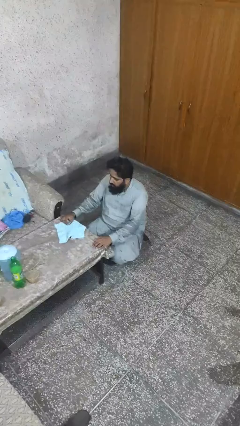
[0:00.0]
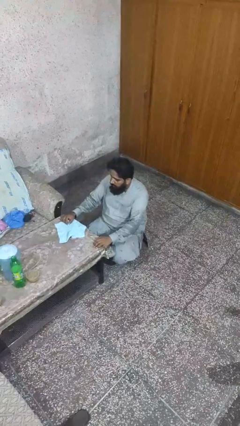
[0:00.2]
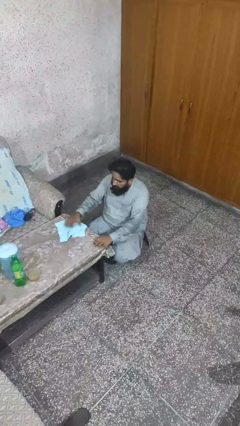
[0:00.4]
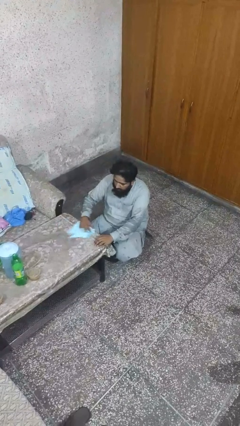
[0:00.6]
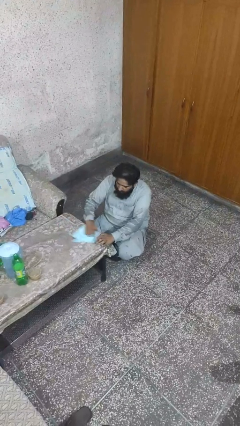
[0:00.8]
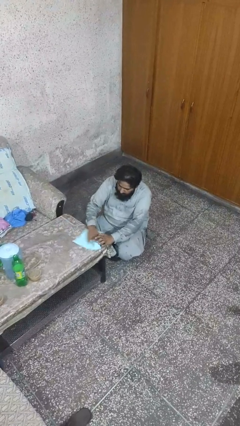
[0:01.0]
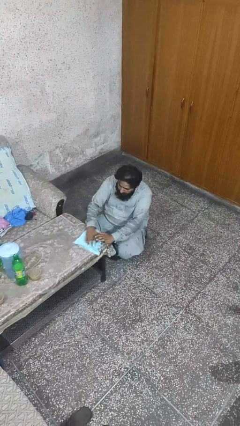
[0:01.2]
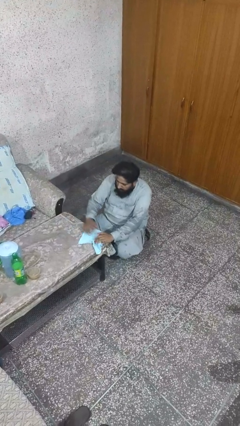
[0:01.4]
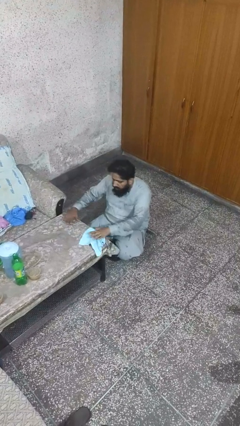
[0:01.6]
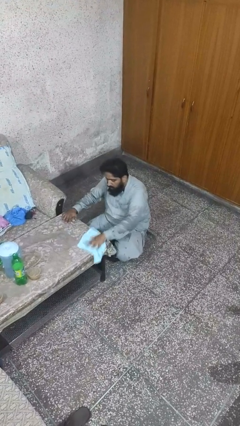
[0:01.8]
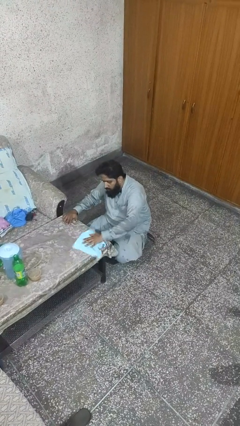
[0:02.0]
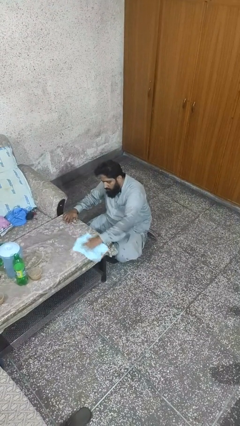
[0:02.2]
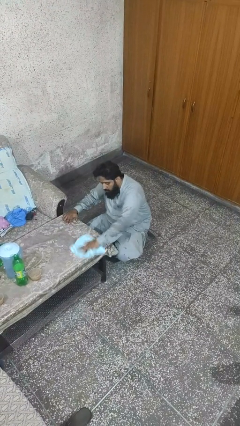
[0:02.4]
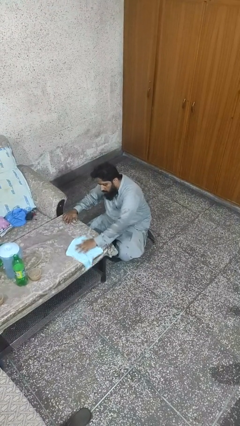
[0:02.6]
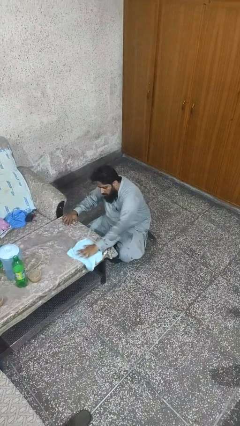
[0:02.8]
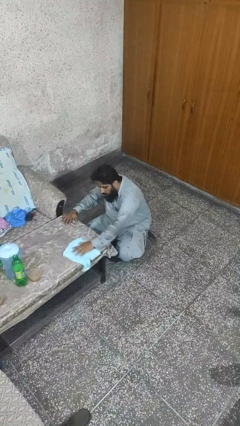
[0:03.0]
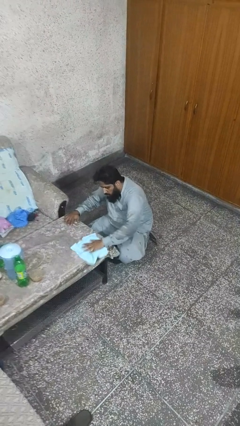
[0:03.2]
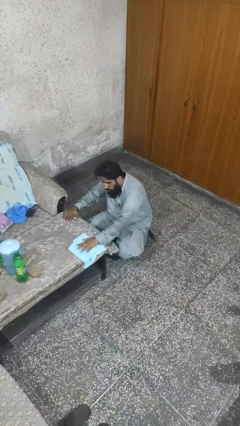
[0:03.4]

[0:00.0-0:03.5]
person cleans table with rag

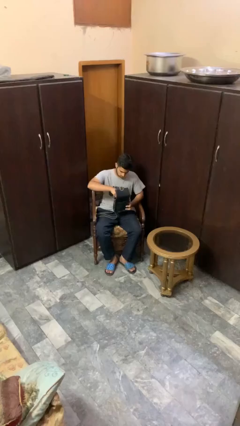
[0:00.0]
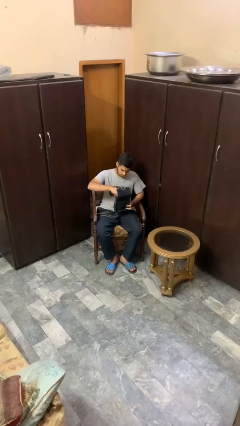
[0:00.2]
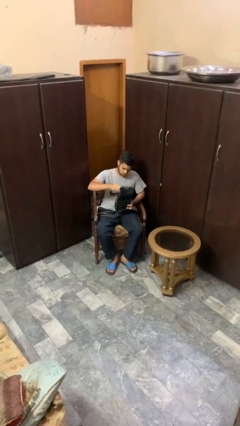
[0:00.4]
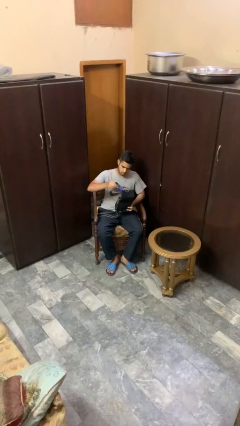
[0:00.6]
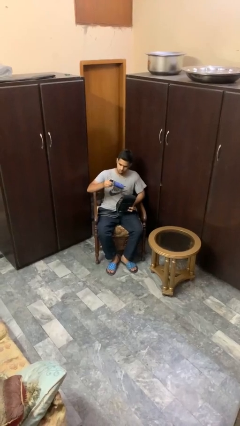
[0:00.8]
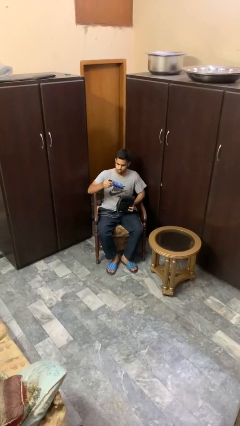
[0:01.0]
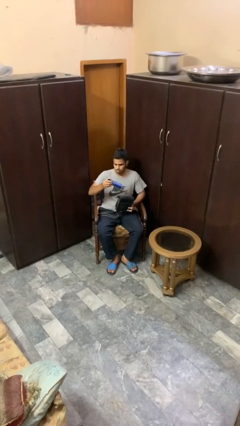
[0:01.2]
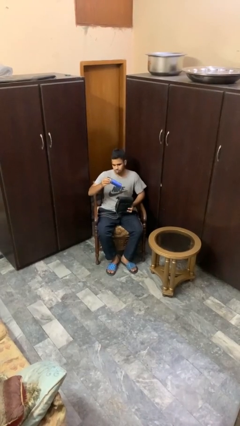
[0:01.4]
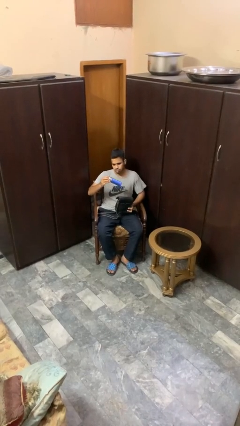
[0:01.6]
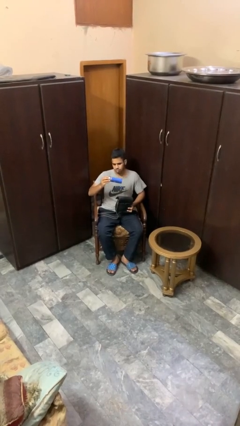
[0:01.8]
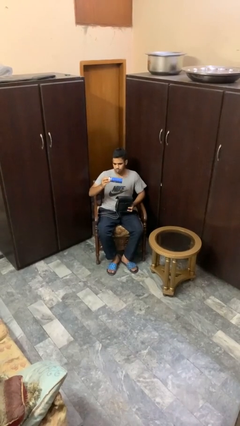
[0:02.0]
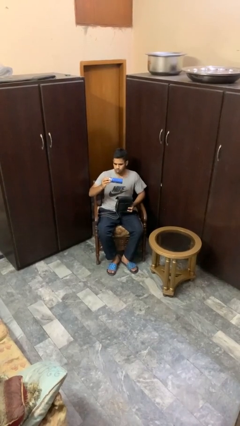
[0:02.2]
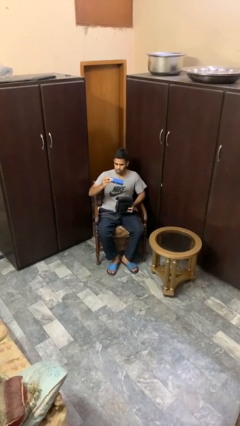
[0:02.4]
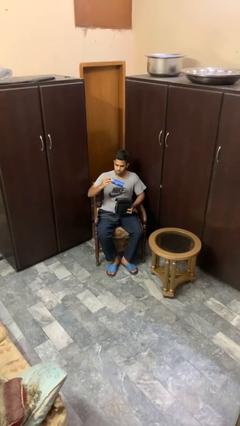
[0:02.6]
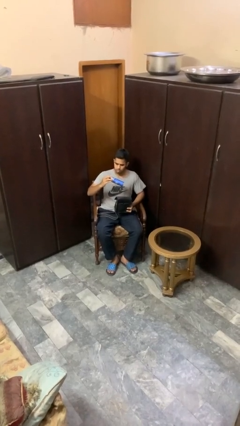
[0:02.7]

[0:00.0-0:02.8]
person takes object from purse

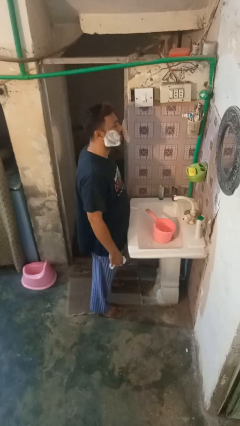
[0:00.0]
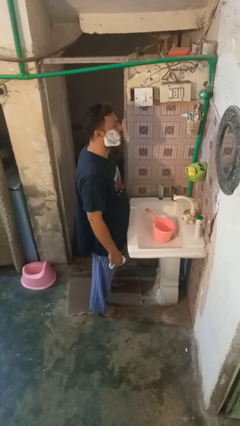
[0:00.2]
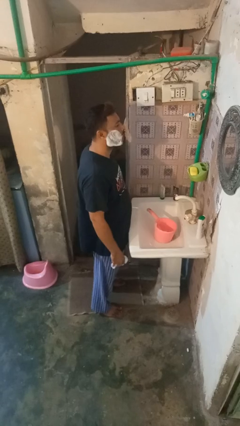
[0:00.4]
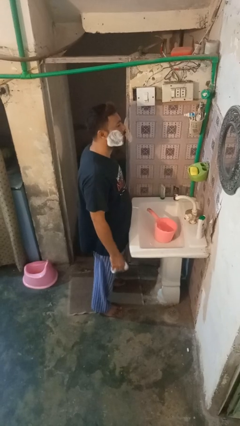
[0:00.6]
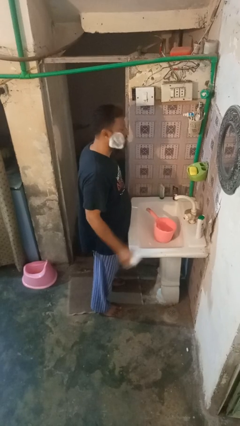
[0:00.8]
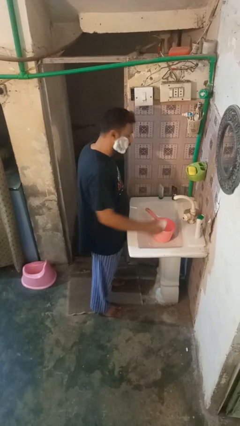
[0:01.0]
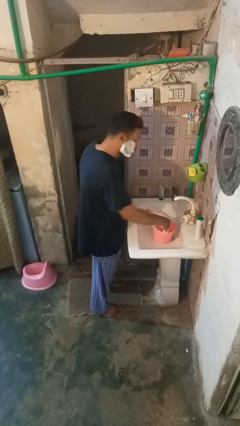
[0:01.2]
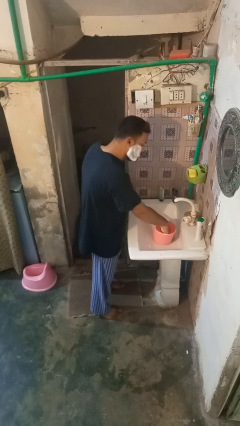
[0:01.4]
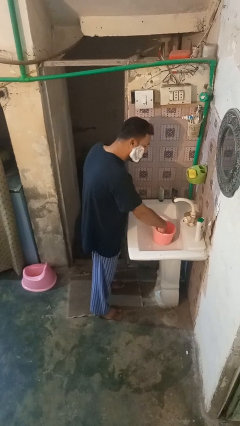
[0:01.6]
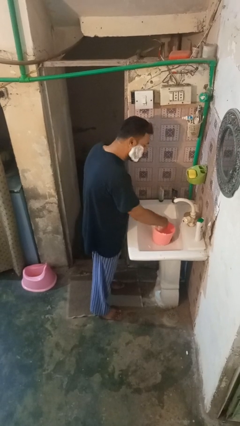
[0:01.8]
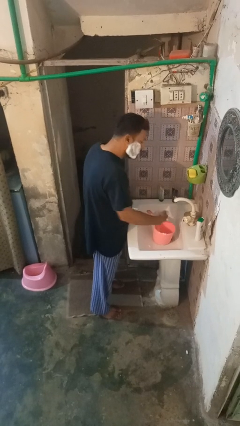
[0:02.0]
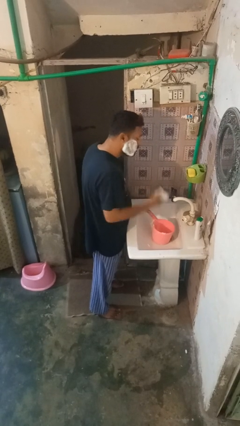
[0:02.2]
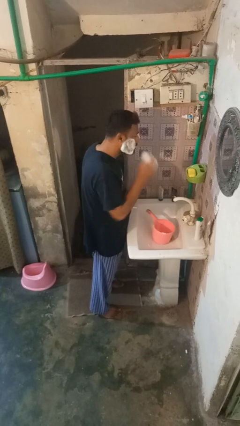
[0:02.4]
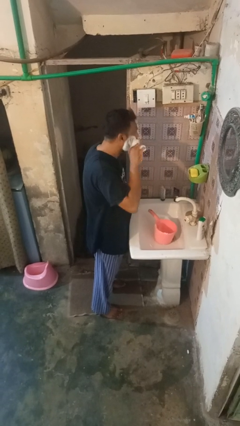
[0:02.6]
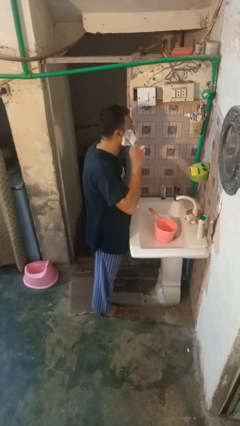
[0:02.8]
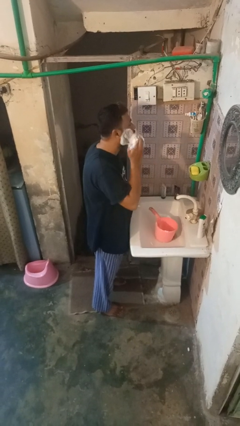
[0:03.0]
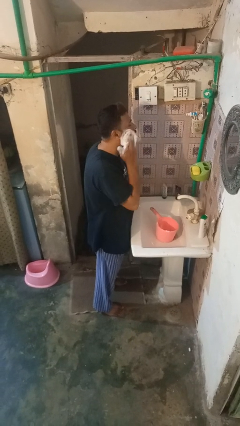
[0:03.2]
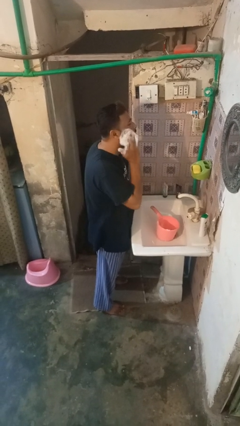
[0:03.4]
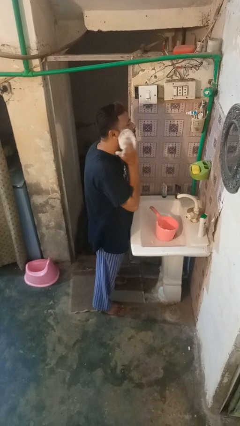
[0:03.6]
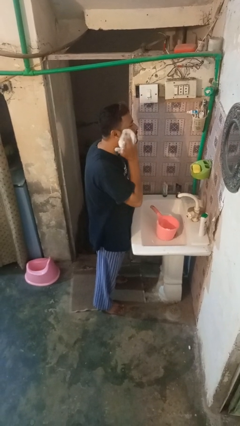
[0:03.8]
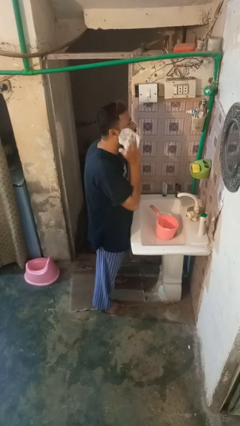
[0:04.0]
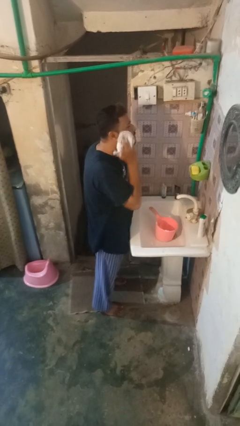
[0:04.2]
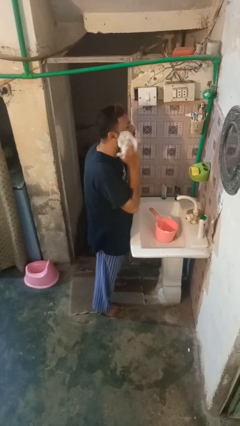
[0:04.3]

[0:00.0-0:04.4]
person applies shaving cream

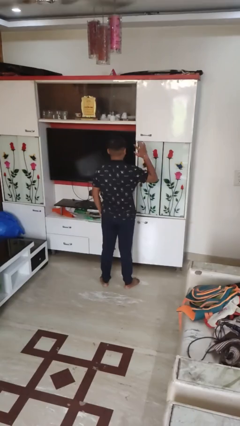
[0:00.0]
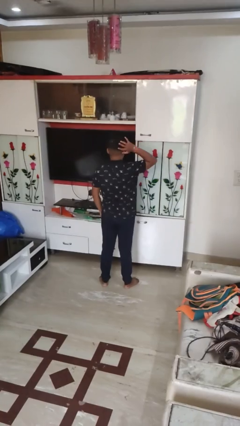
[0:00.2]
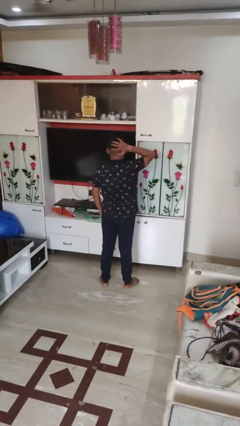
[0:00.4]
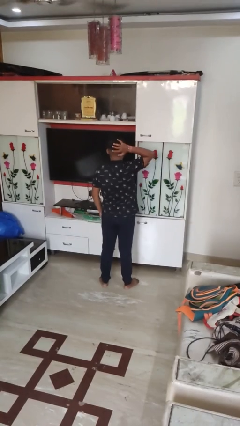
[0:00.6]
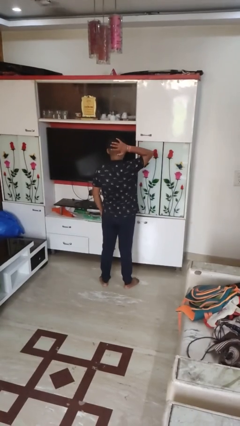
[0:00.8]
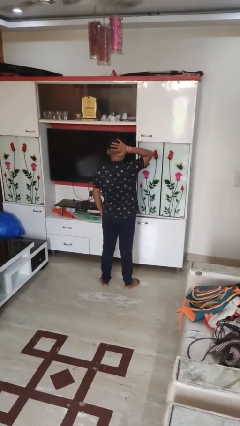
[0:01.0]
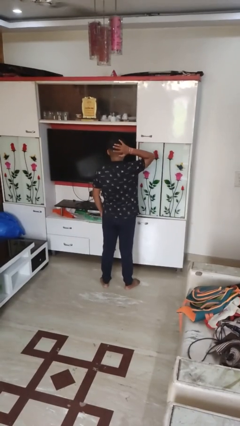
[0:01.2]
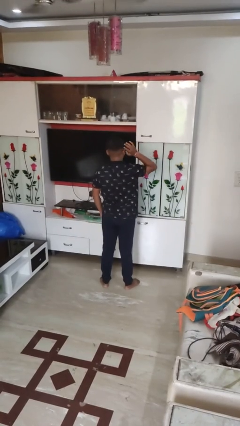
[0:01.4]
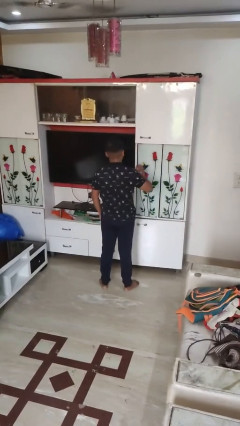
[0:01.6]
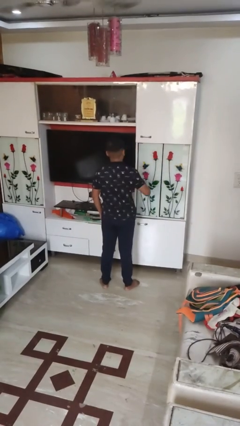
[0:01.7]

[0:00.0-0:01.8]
person pats head

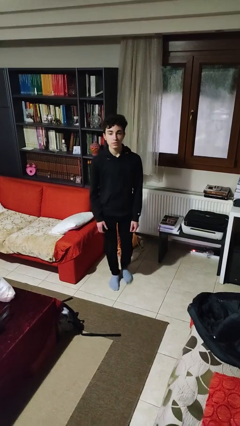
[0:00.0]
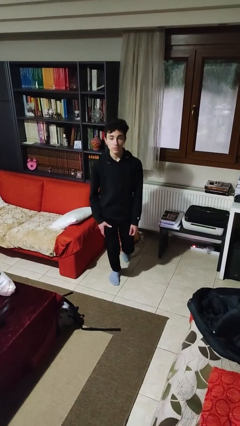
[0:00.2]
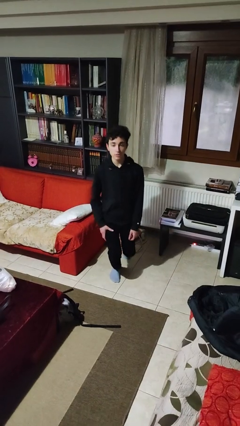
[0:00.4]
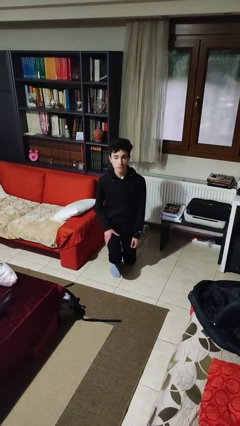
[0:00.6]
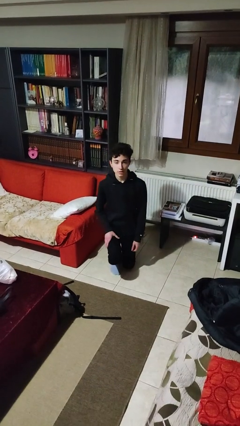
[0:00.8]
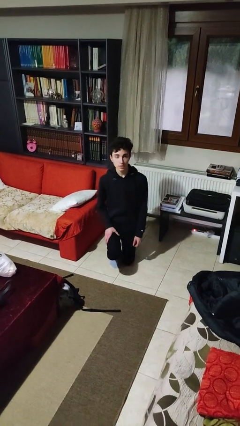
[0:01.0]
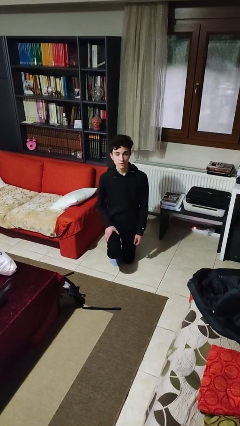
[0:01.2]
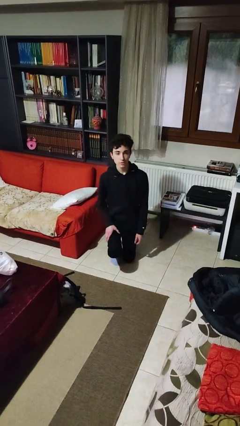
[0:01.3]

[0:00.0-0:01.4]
person kneels

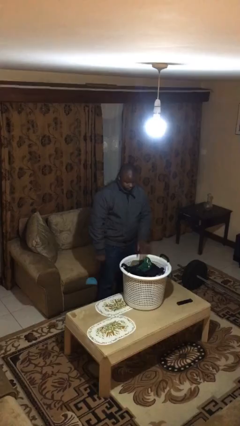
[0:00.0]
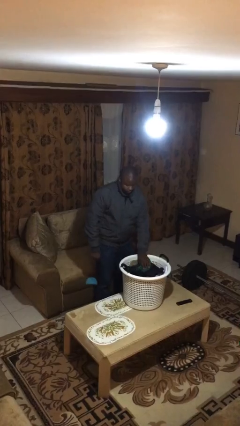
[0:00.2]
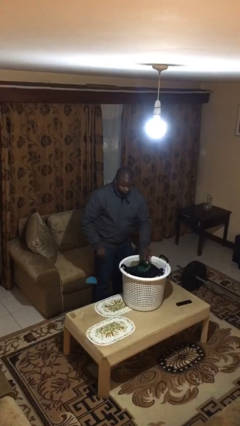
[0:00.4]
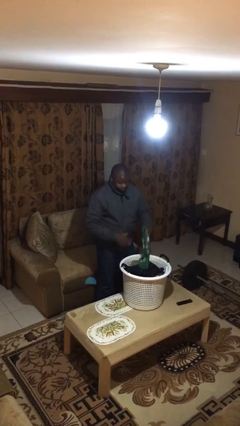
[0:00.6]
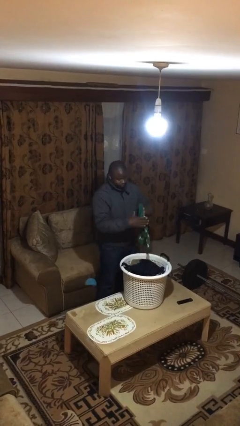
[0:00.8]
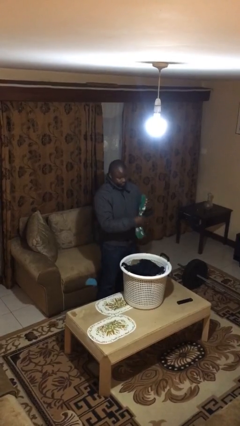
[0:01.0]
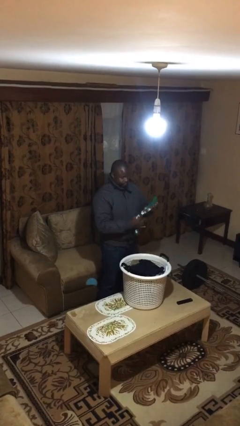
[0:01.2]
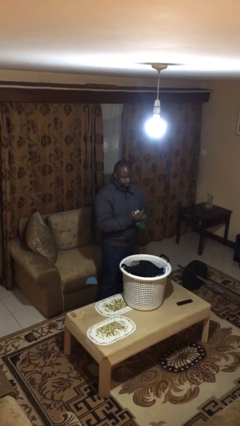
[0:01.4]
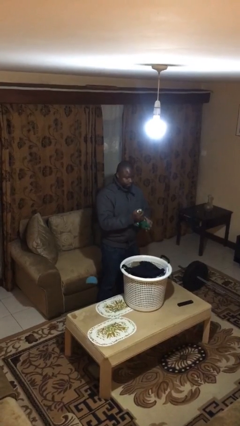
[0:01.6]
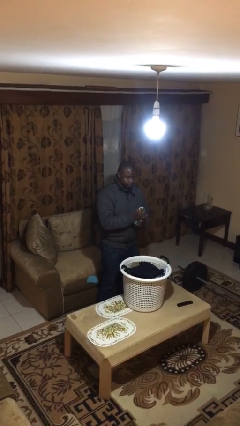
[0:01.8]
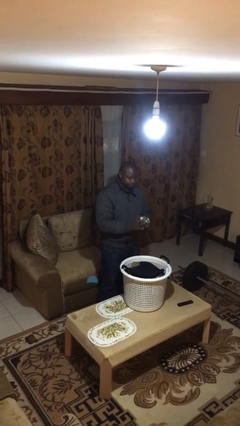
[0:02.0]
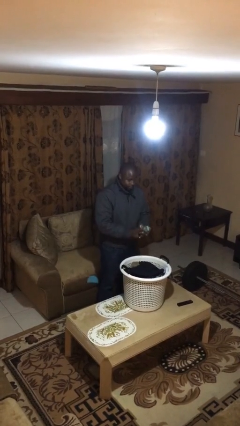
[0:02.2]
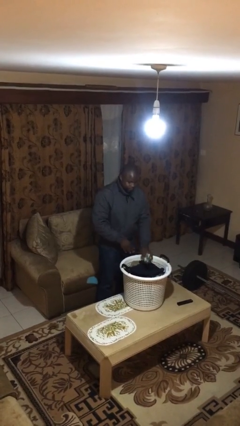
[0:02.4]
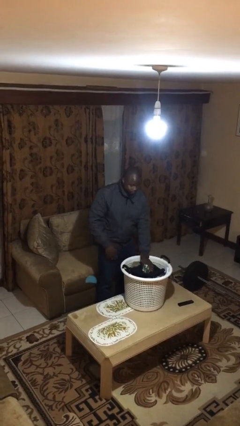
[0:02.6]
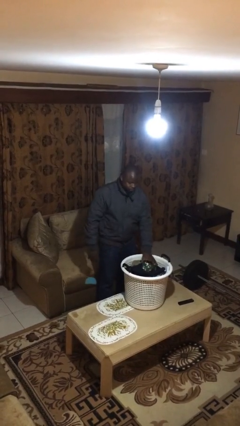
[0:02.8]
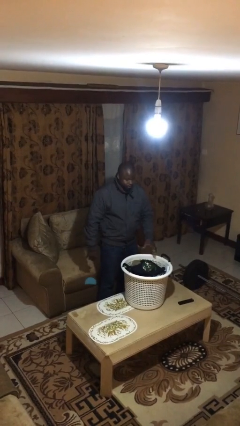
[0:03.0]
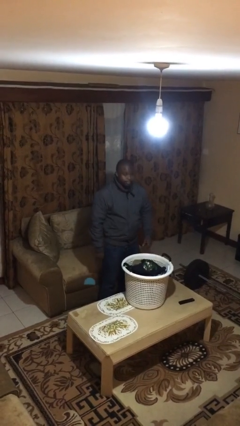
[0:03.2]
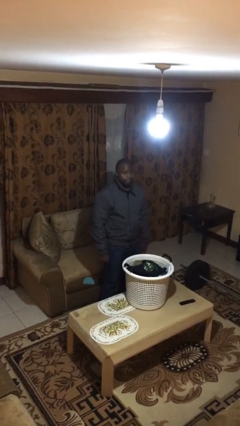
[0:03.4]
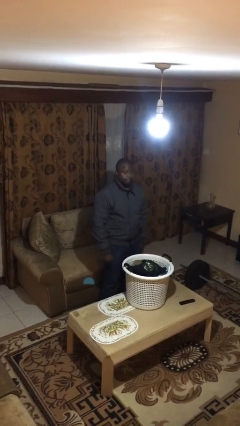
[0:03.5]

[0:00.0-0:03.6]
person folds socks
